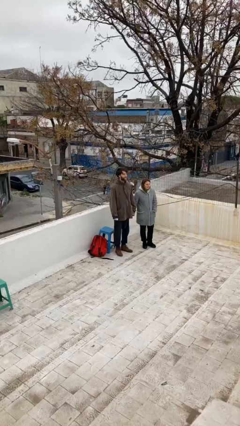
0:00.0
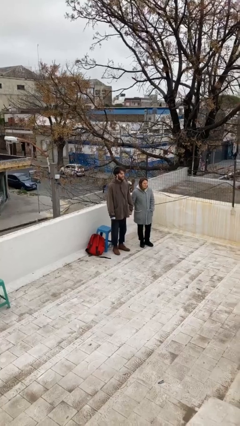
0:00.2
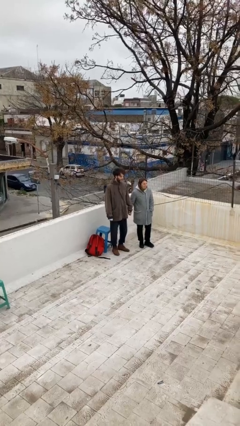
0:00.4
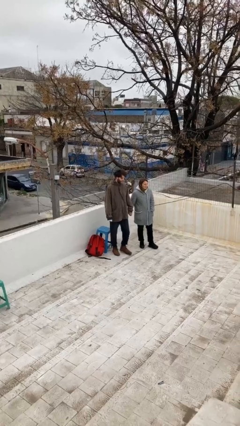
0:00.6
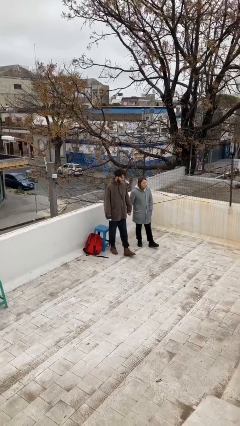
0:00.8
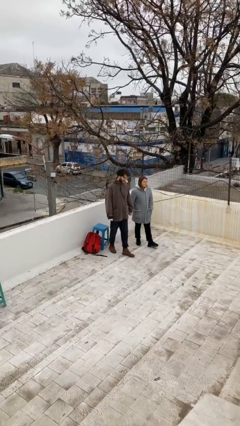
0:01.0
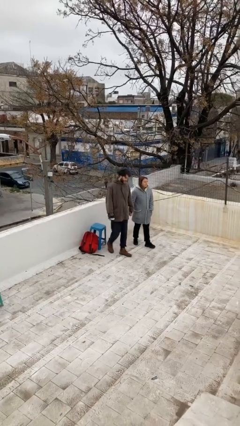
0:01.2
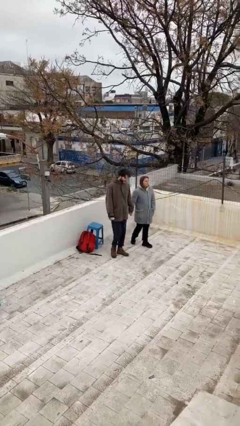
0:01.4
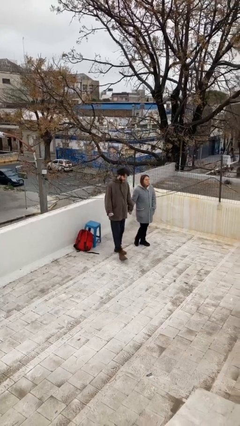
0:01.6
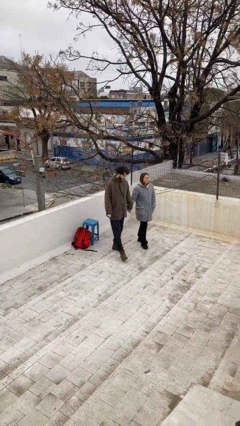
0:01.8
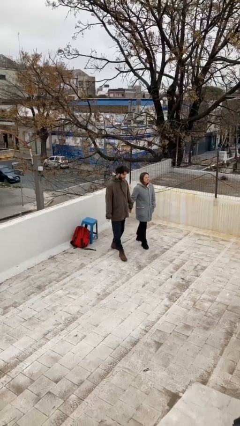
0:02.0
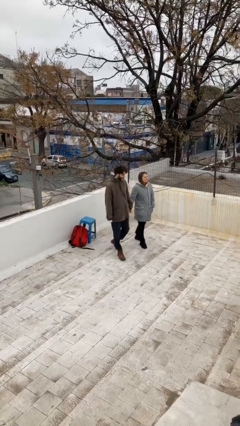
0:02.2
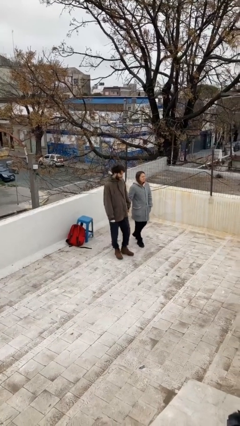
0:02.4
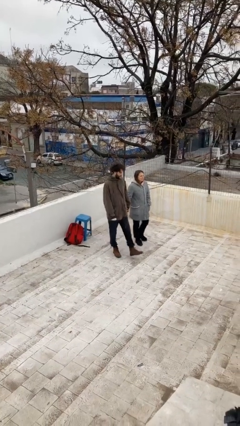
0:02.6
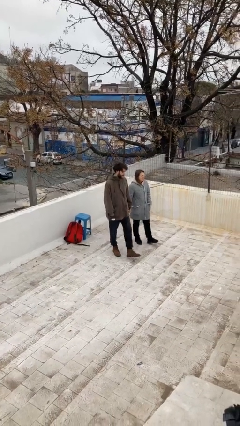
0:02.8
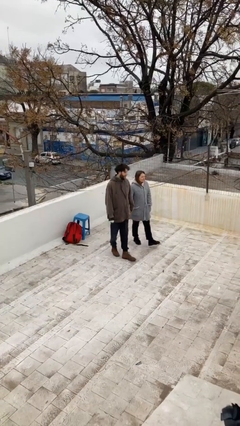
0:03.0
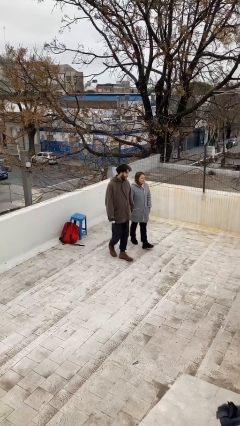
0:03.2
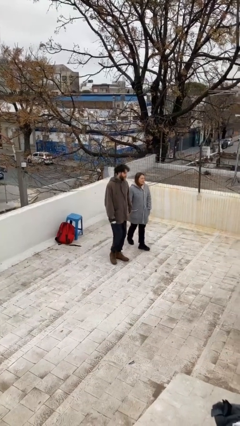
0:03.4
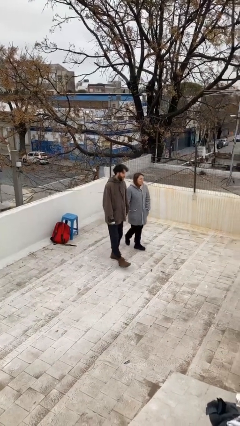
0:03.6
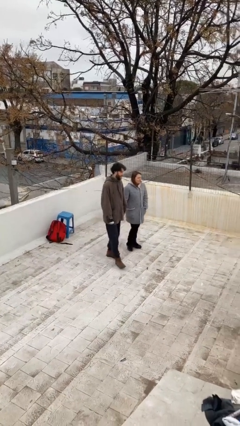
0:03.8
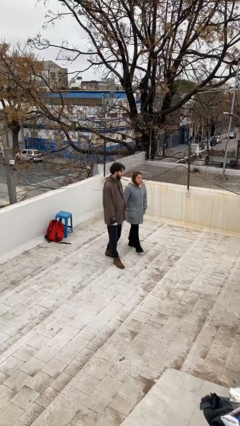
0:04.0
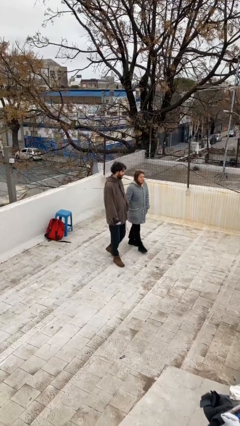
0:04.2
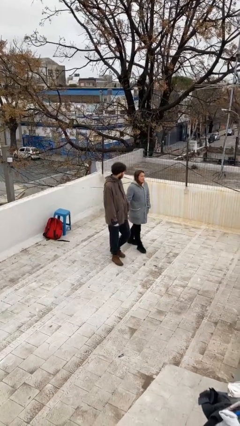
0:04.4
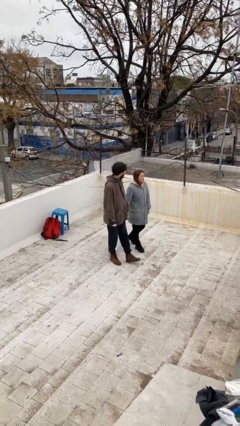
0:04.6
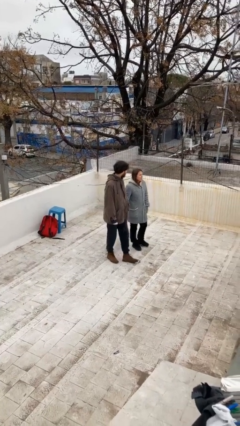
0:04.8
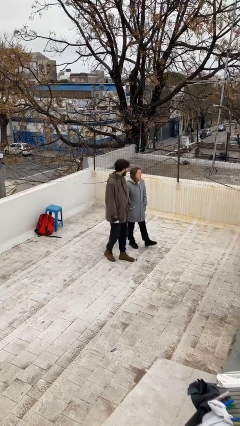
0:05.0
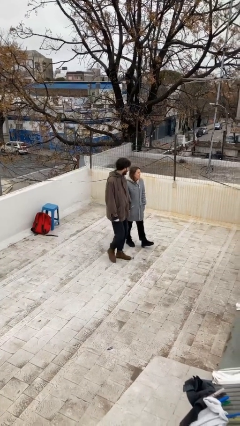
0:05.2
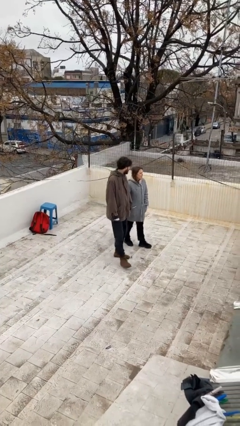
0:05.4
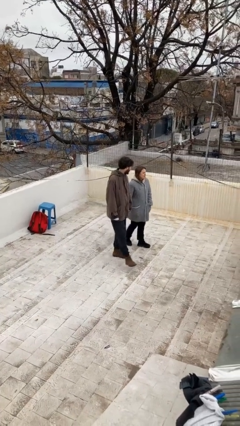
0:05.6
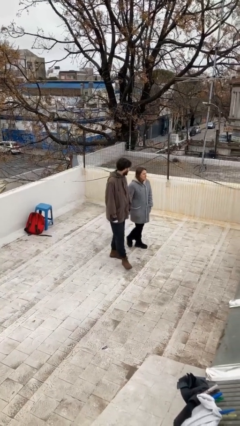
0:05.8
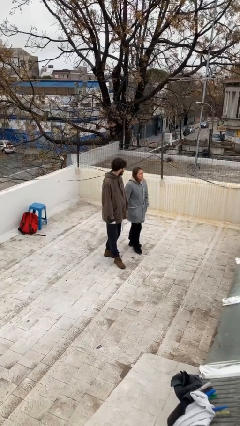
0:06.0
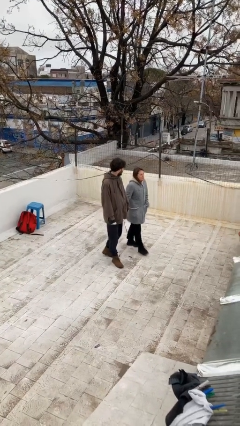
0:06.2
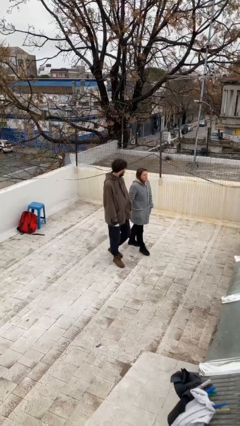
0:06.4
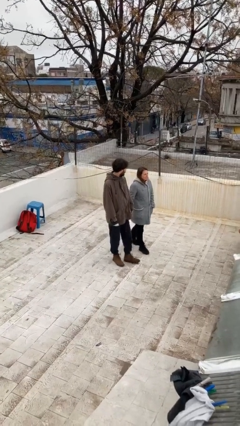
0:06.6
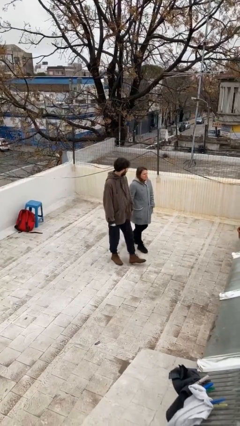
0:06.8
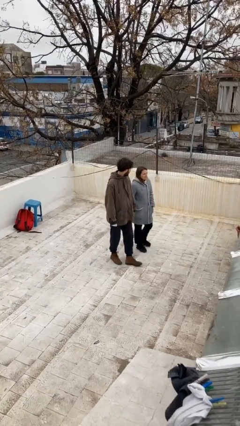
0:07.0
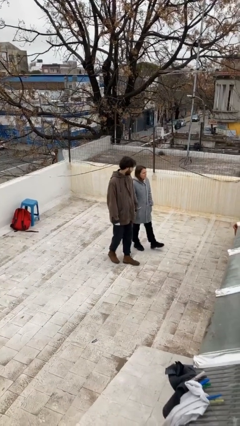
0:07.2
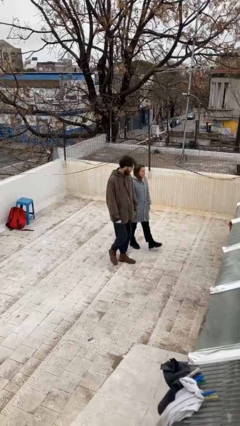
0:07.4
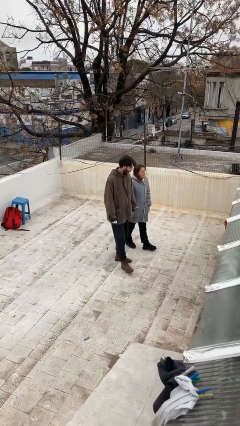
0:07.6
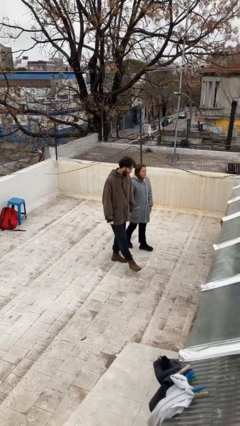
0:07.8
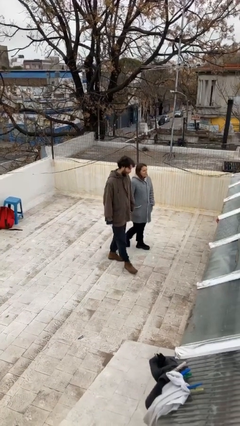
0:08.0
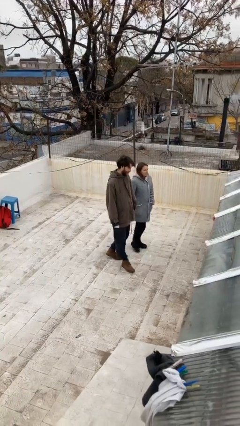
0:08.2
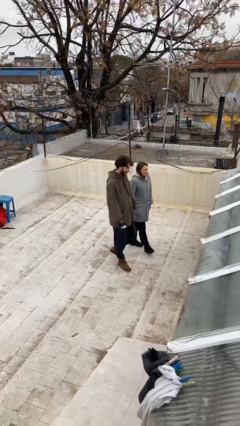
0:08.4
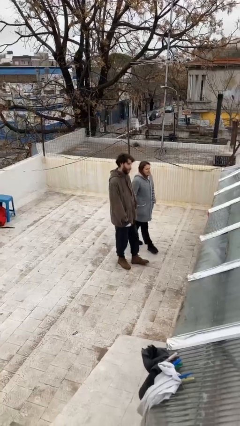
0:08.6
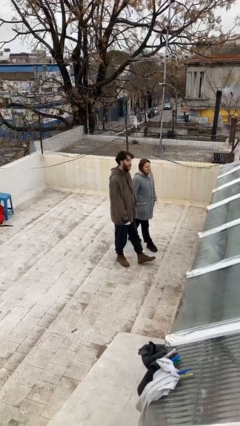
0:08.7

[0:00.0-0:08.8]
person holds hand

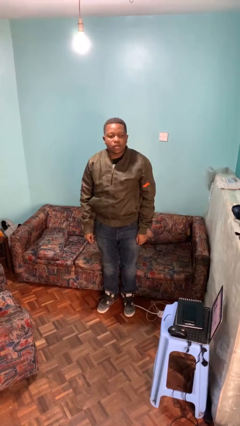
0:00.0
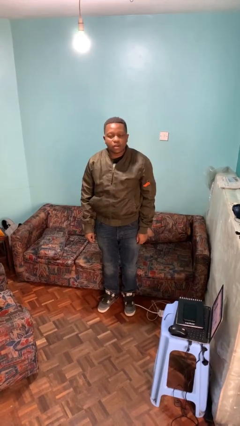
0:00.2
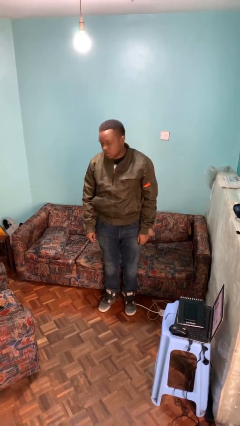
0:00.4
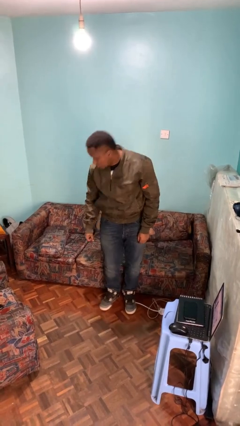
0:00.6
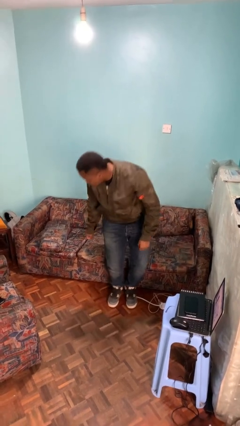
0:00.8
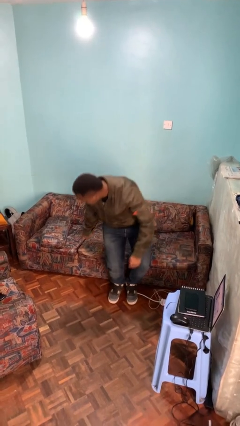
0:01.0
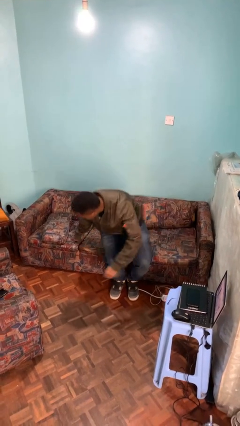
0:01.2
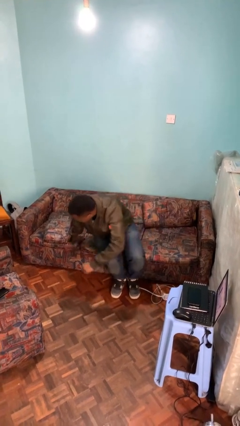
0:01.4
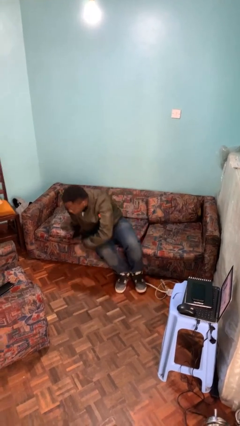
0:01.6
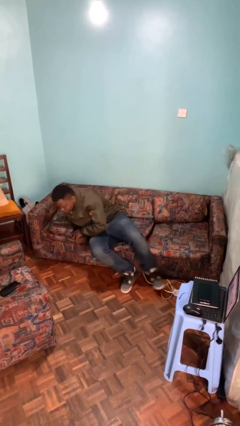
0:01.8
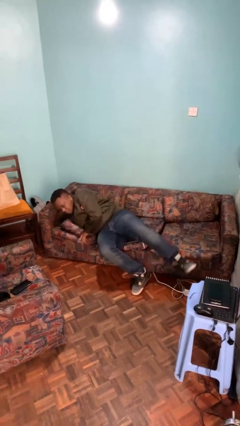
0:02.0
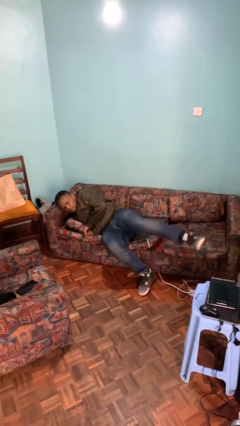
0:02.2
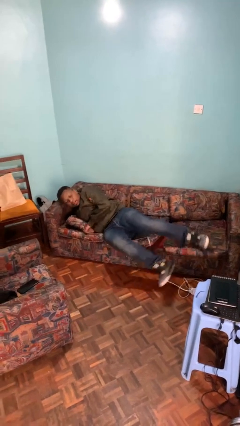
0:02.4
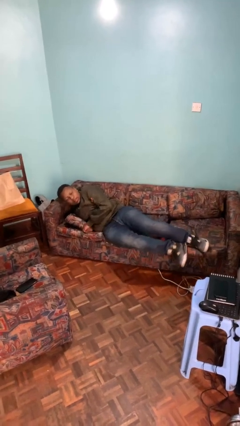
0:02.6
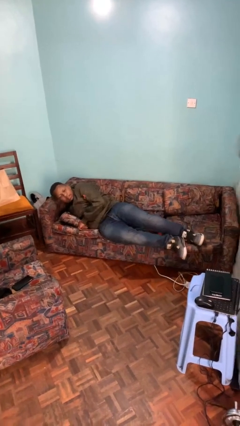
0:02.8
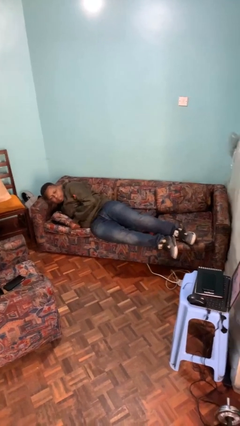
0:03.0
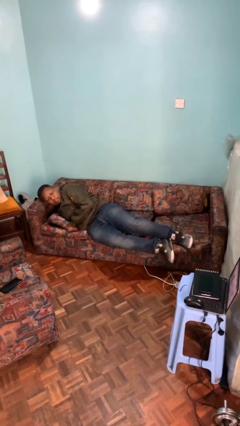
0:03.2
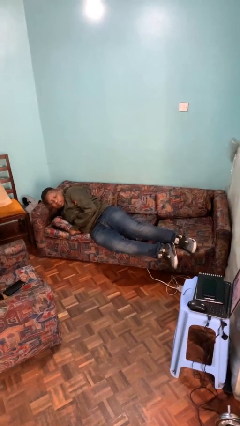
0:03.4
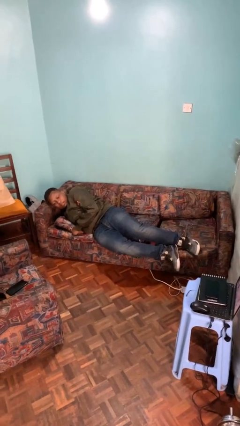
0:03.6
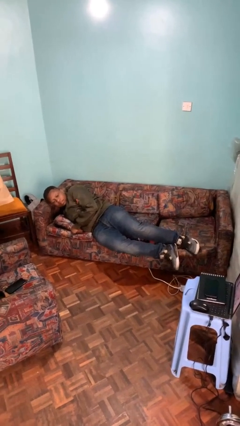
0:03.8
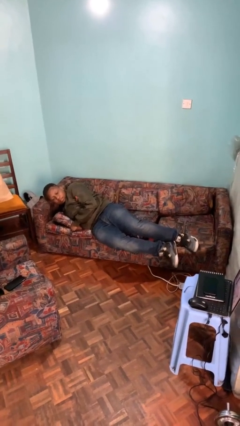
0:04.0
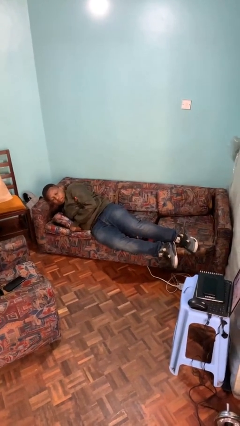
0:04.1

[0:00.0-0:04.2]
person lies down on couch

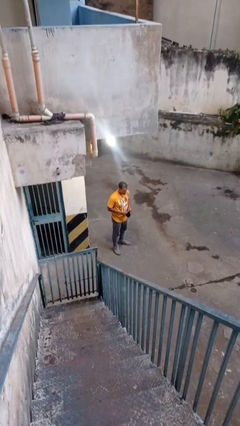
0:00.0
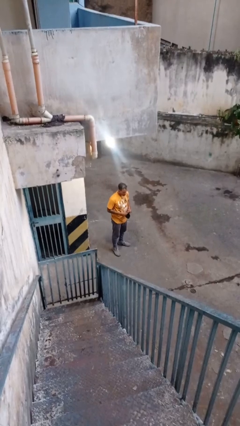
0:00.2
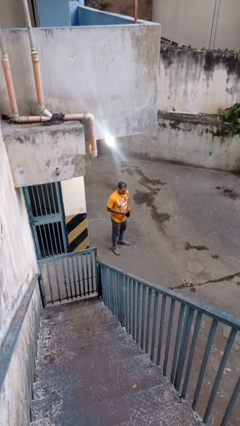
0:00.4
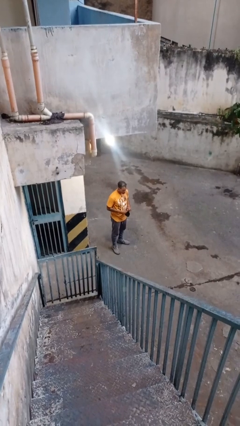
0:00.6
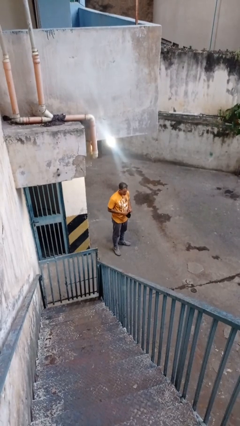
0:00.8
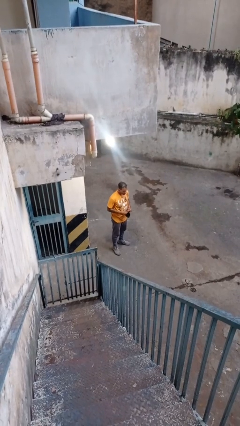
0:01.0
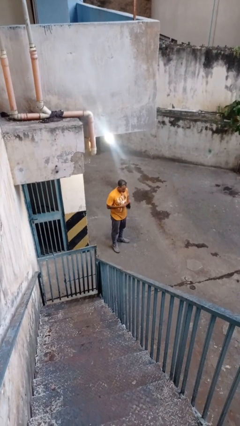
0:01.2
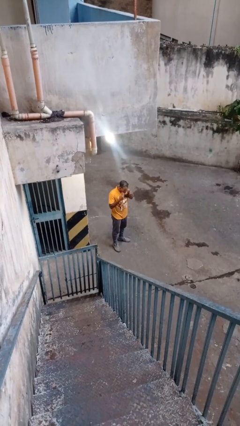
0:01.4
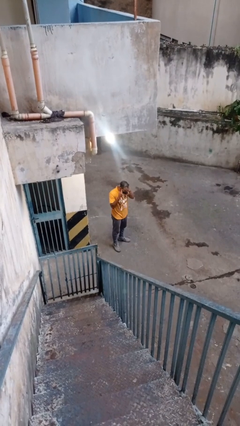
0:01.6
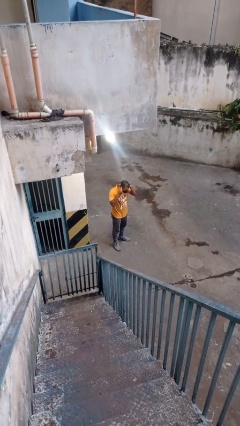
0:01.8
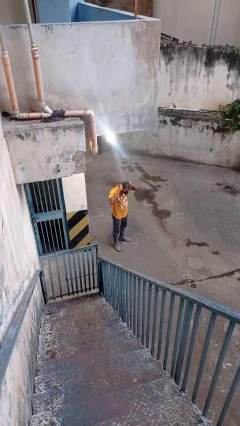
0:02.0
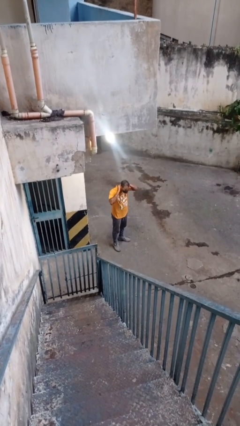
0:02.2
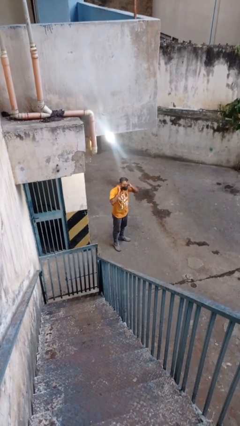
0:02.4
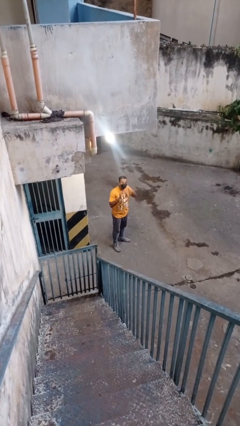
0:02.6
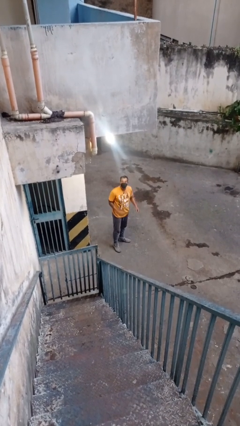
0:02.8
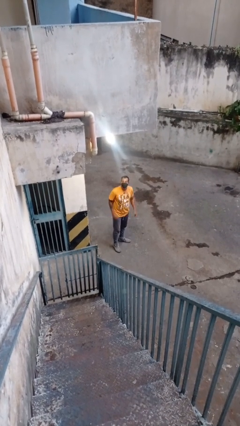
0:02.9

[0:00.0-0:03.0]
person puts on facemask

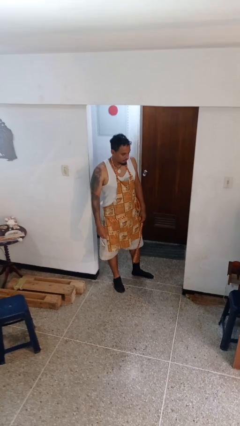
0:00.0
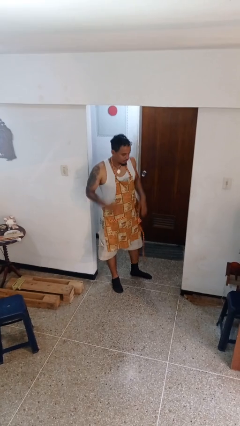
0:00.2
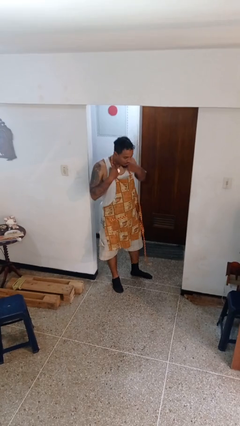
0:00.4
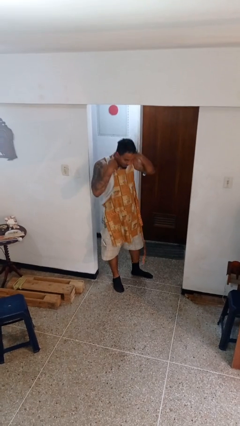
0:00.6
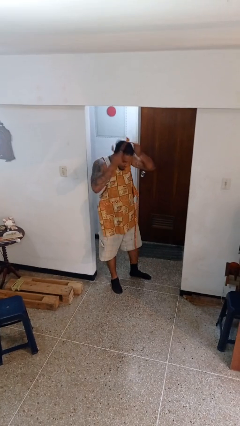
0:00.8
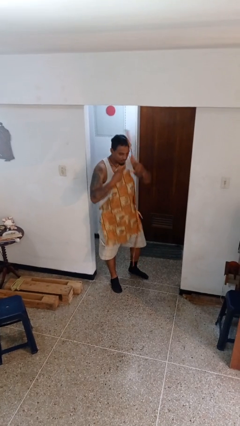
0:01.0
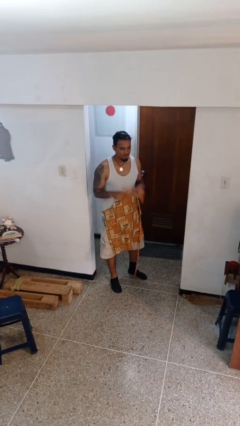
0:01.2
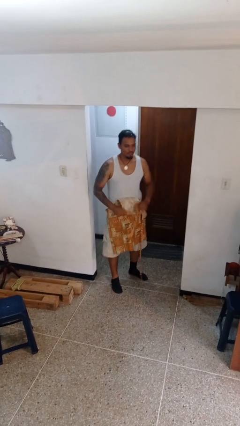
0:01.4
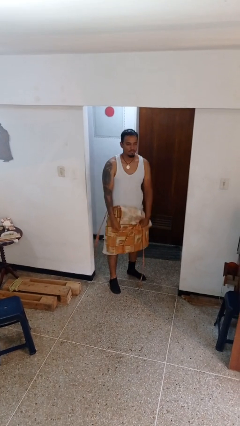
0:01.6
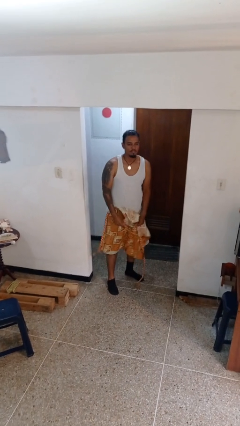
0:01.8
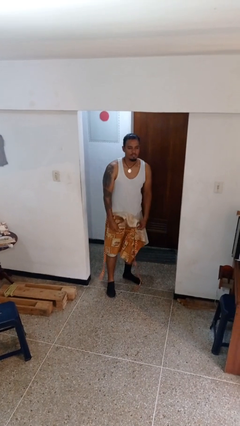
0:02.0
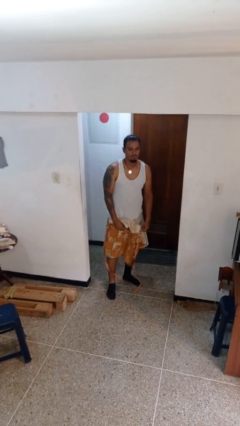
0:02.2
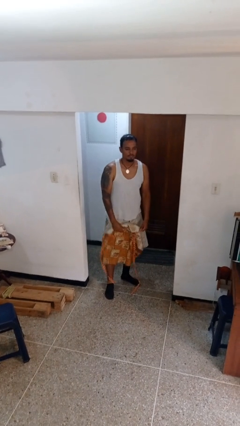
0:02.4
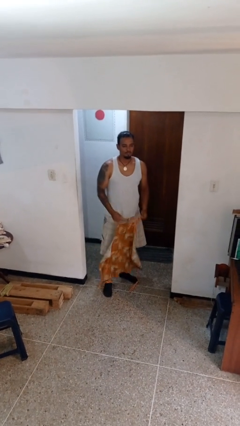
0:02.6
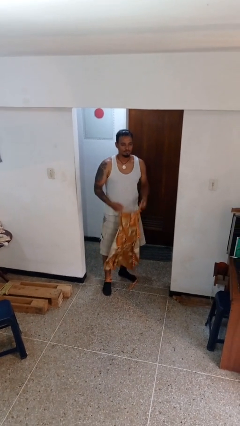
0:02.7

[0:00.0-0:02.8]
person takes off apron
